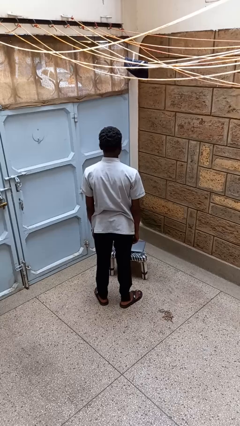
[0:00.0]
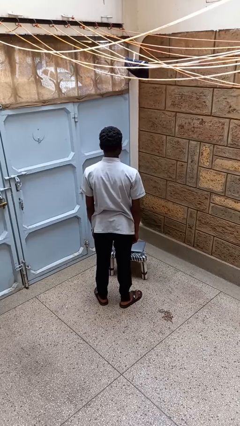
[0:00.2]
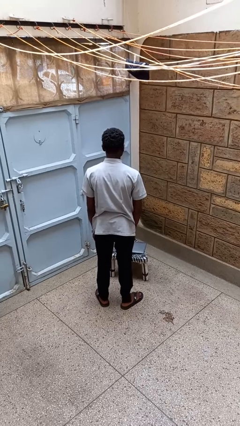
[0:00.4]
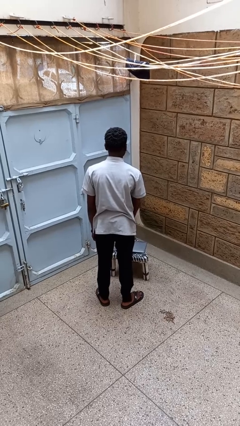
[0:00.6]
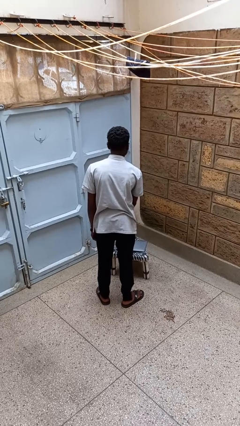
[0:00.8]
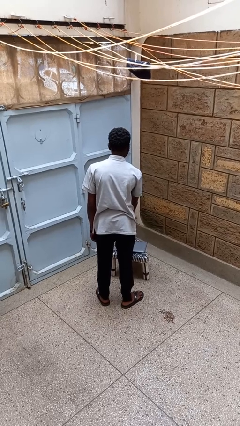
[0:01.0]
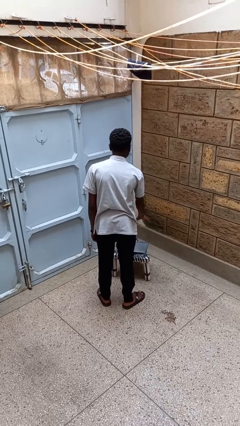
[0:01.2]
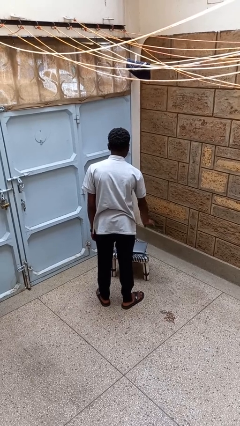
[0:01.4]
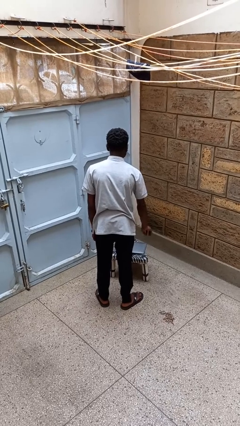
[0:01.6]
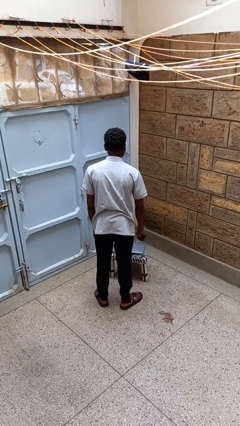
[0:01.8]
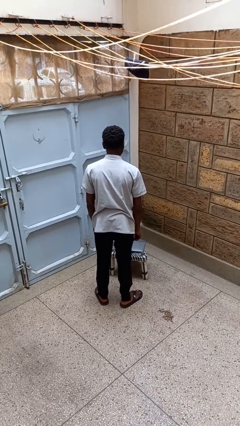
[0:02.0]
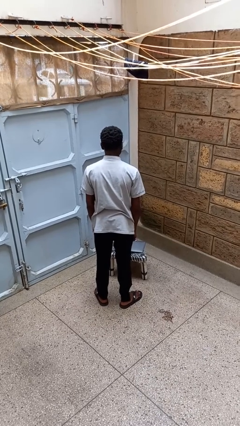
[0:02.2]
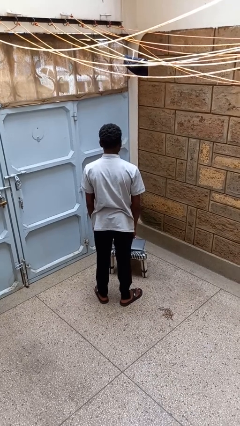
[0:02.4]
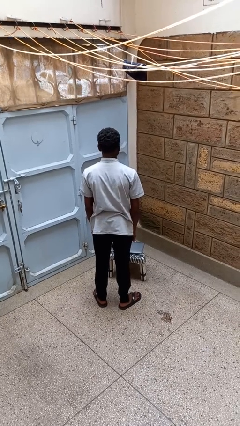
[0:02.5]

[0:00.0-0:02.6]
person waves hand over object

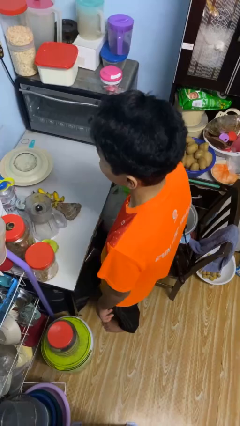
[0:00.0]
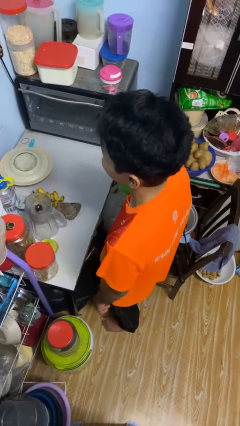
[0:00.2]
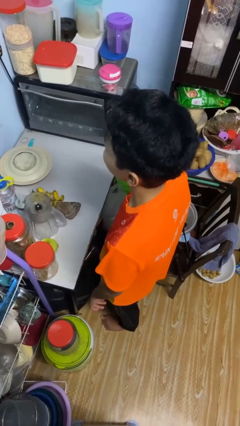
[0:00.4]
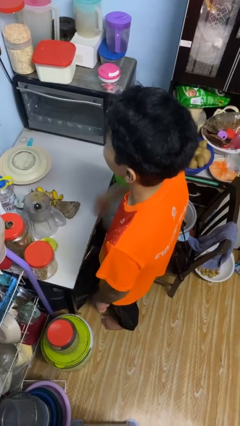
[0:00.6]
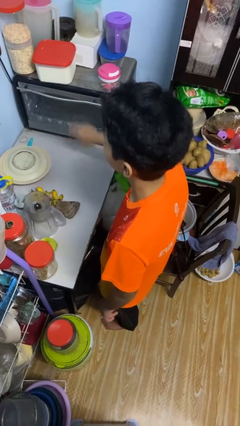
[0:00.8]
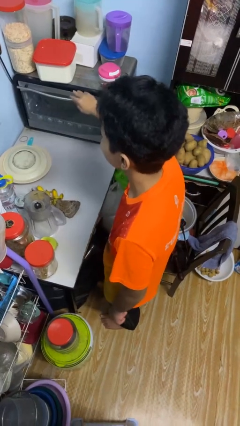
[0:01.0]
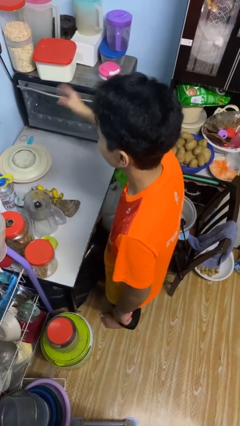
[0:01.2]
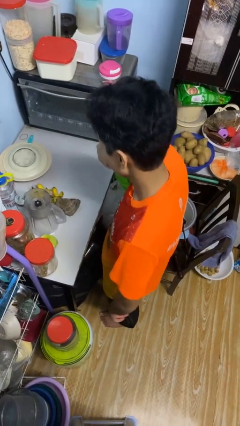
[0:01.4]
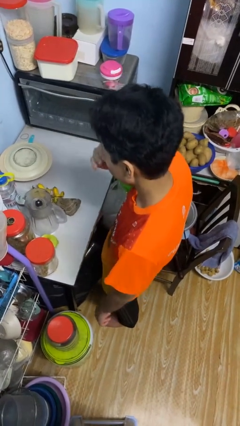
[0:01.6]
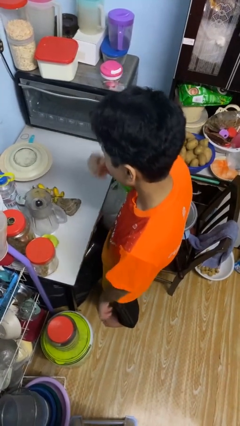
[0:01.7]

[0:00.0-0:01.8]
person burns hand

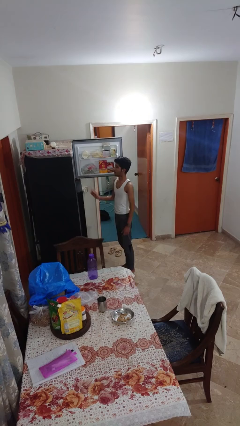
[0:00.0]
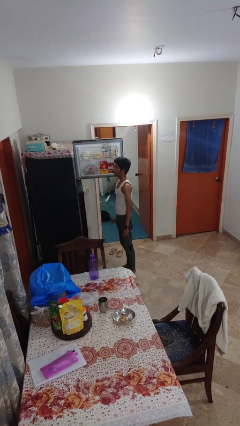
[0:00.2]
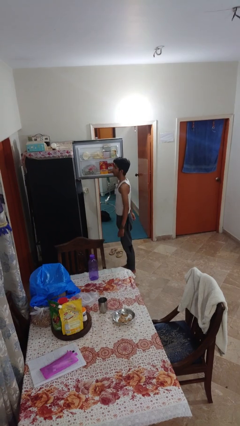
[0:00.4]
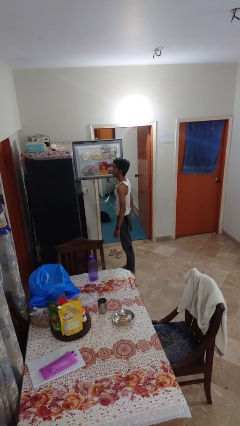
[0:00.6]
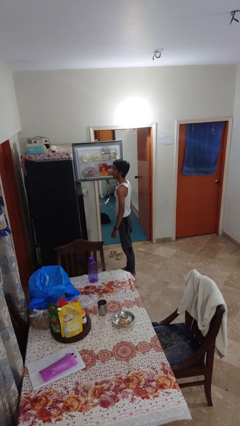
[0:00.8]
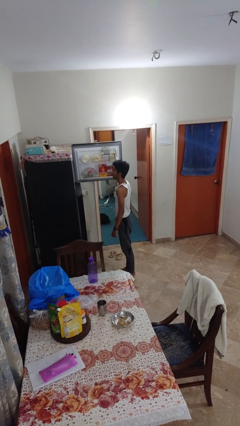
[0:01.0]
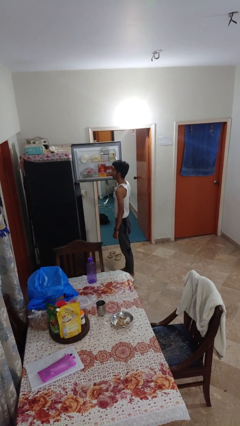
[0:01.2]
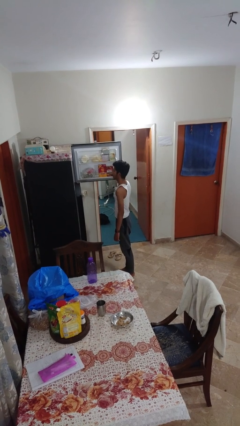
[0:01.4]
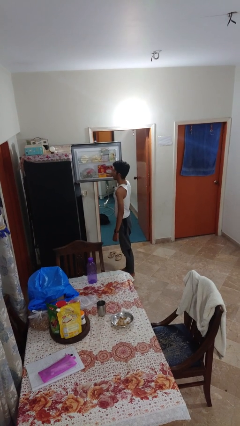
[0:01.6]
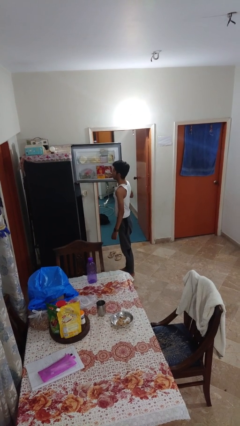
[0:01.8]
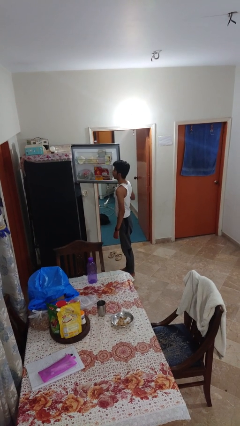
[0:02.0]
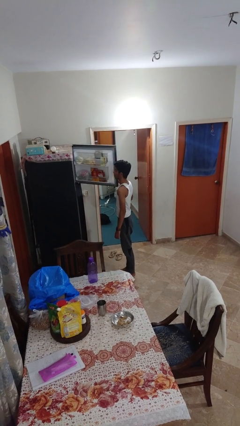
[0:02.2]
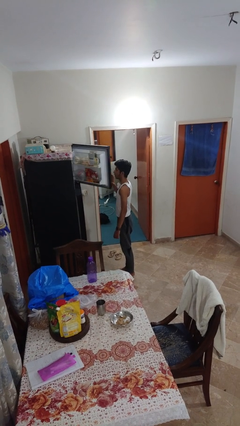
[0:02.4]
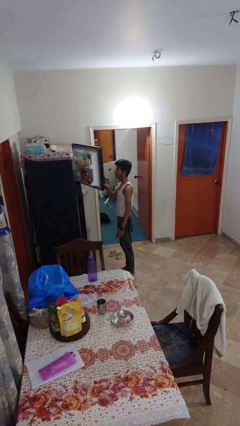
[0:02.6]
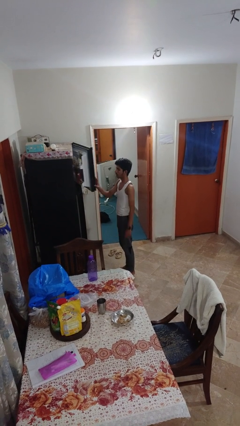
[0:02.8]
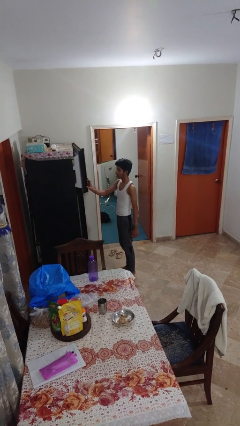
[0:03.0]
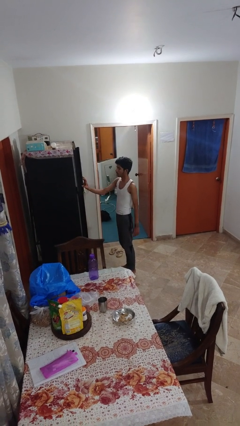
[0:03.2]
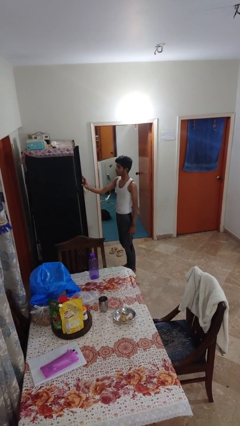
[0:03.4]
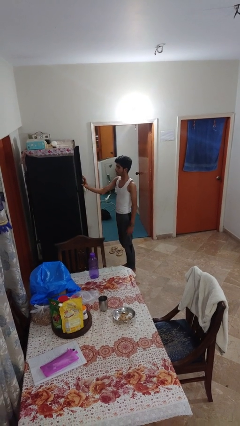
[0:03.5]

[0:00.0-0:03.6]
person closes refrigerator

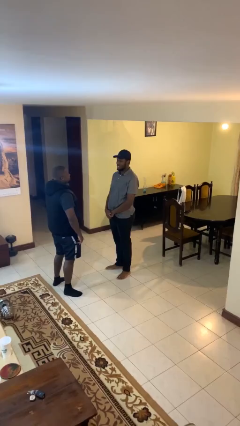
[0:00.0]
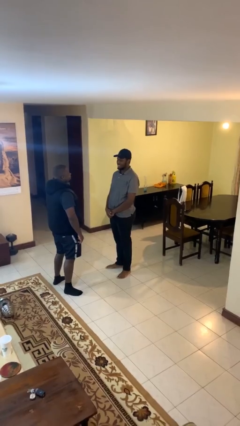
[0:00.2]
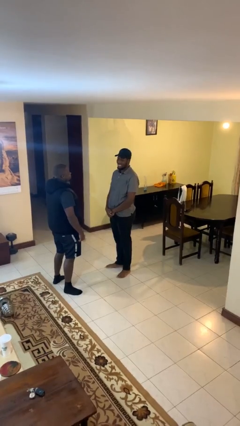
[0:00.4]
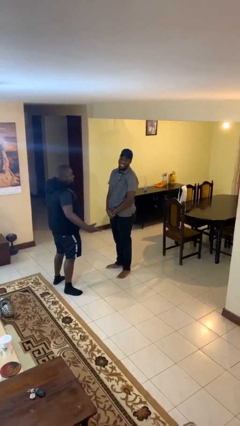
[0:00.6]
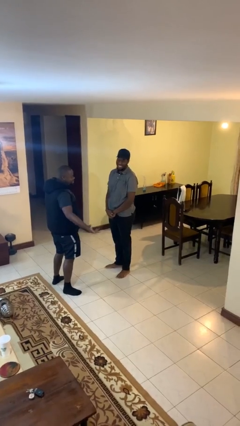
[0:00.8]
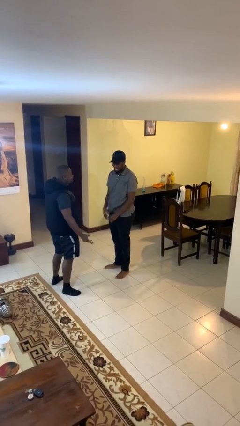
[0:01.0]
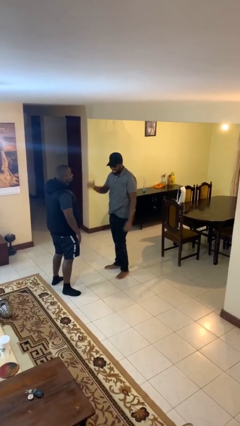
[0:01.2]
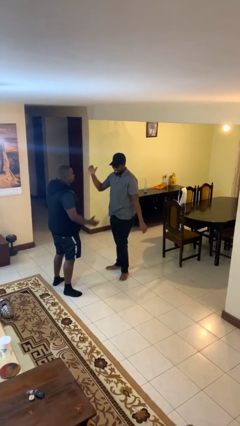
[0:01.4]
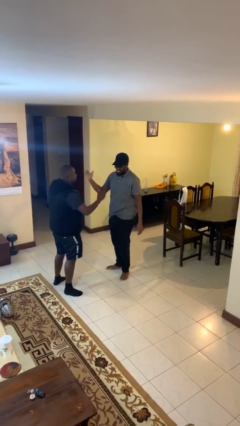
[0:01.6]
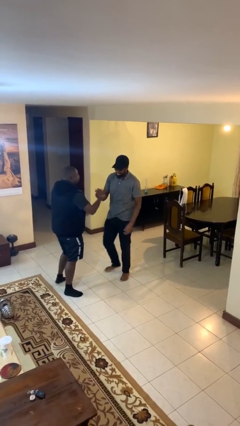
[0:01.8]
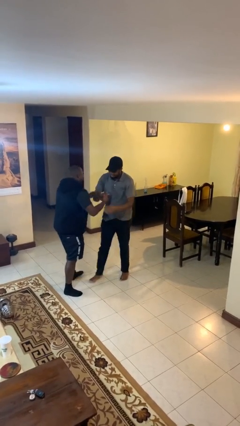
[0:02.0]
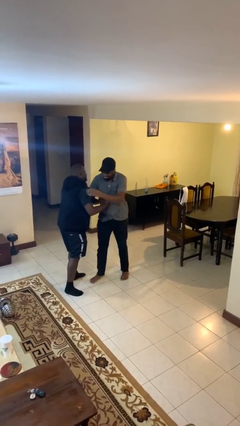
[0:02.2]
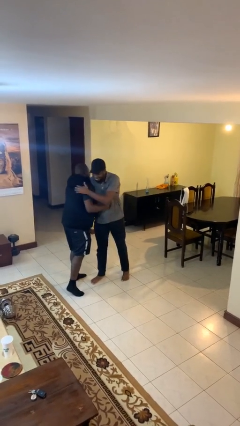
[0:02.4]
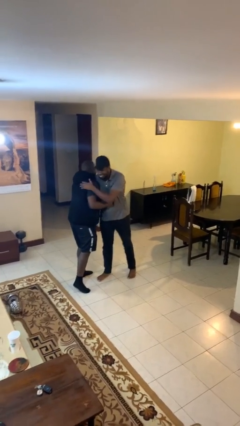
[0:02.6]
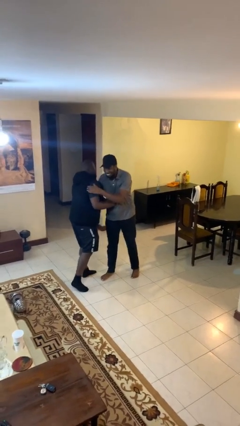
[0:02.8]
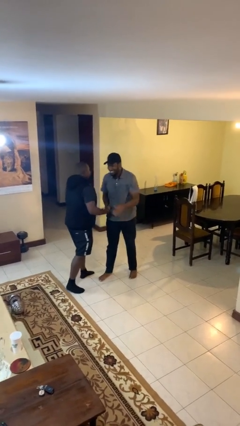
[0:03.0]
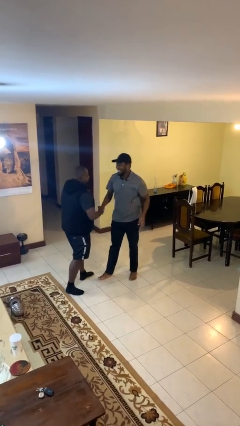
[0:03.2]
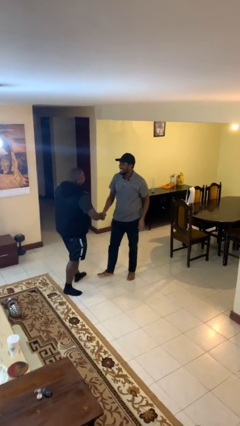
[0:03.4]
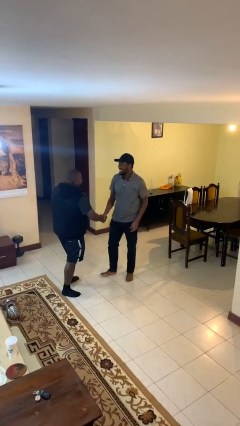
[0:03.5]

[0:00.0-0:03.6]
person embraces person

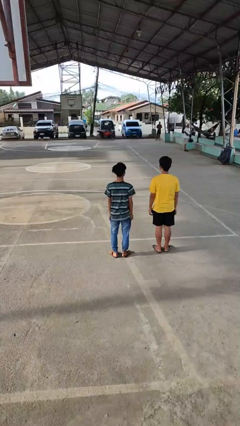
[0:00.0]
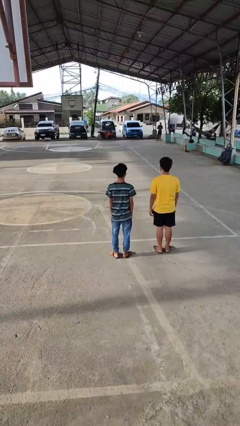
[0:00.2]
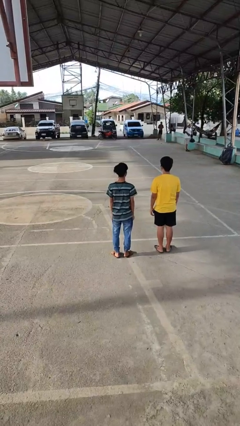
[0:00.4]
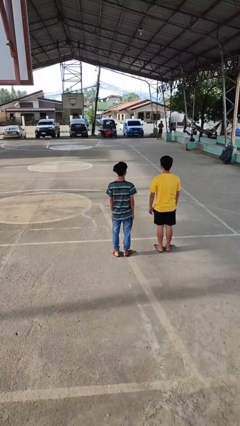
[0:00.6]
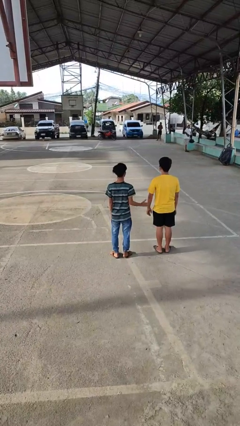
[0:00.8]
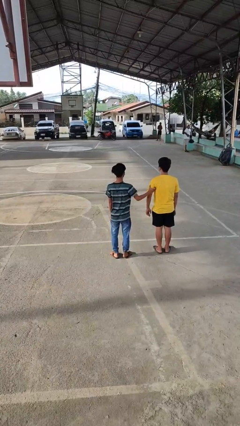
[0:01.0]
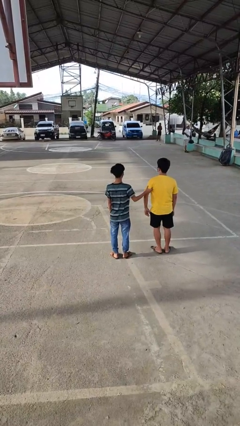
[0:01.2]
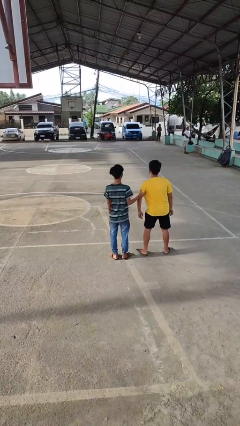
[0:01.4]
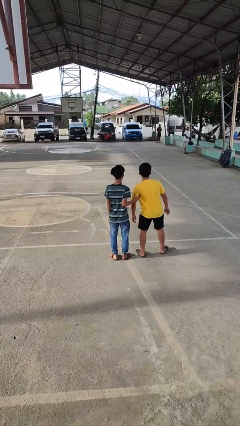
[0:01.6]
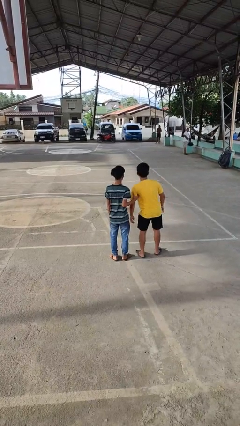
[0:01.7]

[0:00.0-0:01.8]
person grabs person by bicep

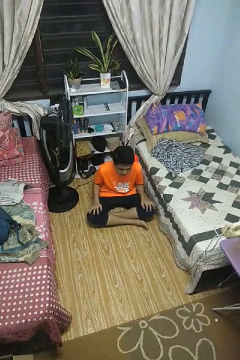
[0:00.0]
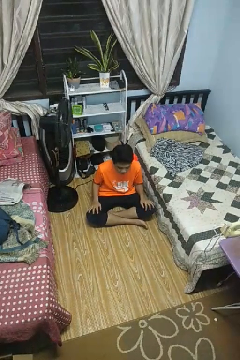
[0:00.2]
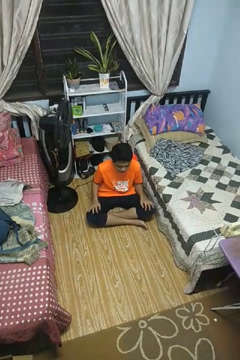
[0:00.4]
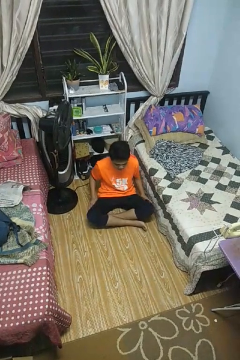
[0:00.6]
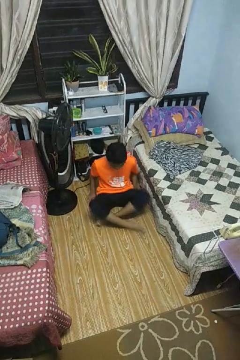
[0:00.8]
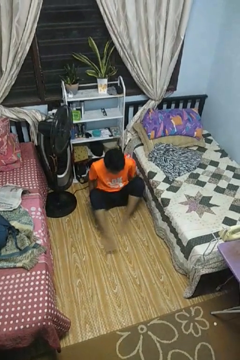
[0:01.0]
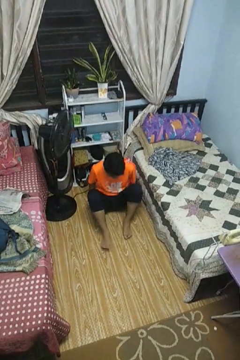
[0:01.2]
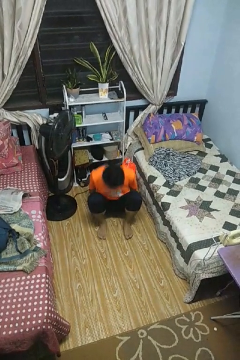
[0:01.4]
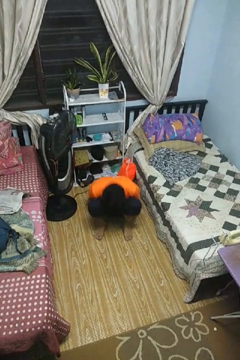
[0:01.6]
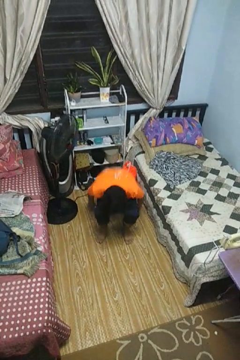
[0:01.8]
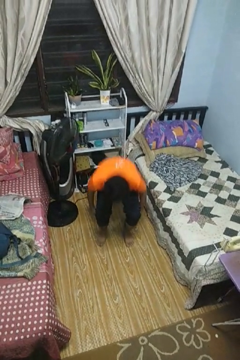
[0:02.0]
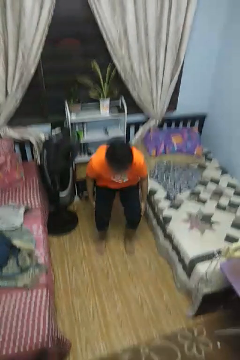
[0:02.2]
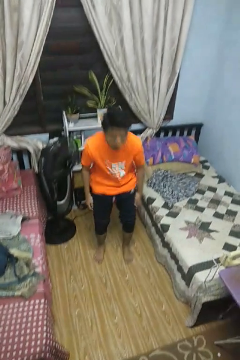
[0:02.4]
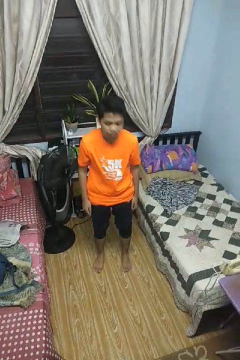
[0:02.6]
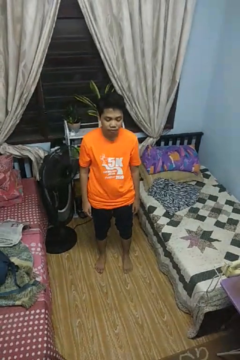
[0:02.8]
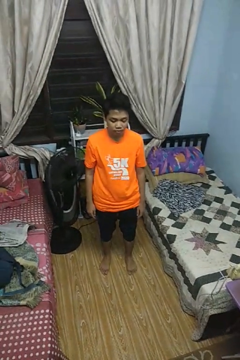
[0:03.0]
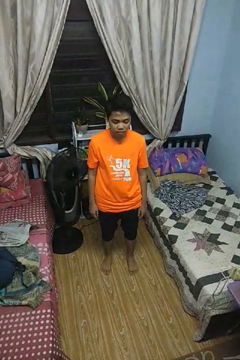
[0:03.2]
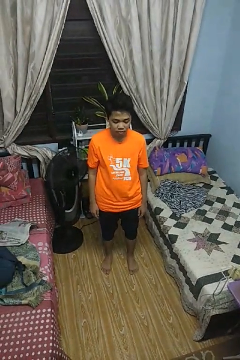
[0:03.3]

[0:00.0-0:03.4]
person stands up from floor

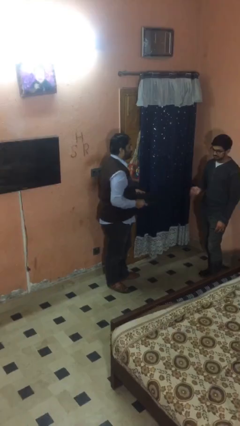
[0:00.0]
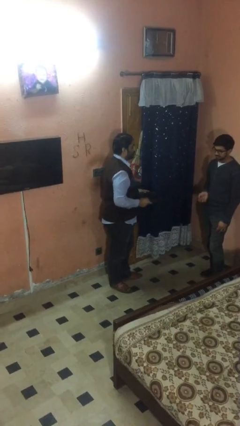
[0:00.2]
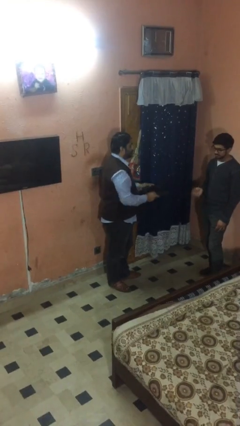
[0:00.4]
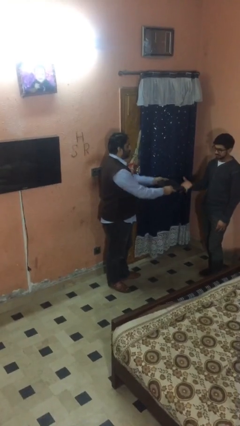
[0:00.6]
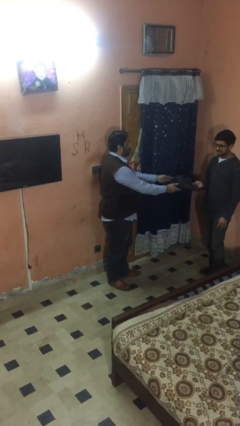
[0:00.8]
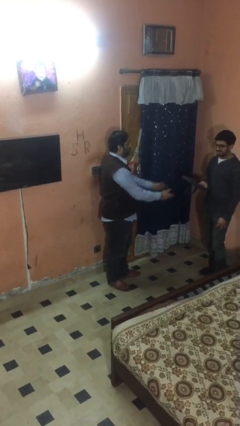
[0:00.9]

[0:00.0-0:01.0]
person transfers object to person
